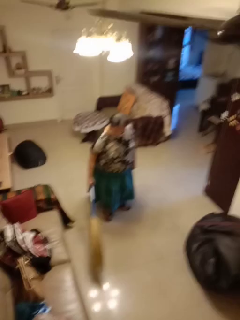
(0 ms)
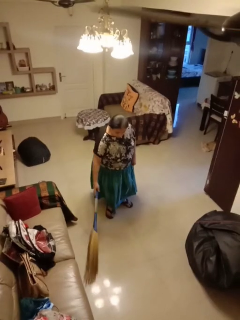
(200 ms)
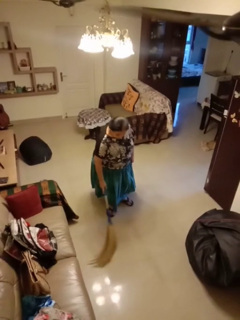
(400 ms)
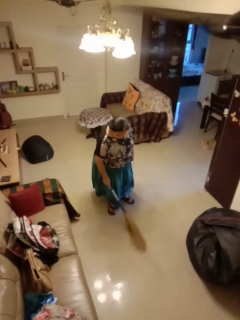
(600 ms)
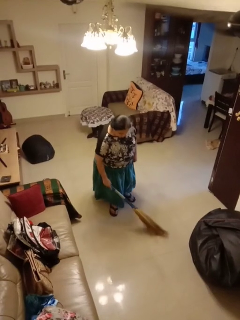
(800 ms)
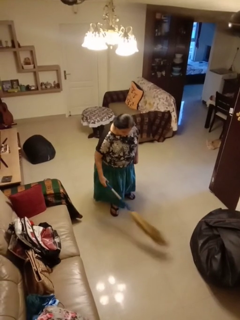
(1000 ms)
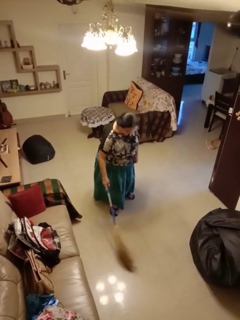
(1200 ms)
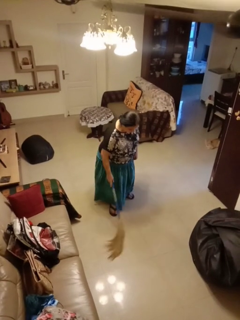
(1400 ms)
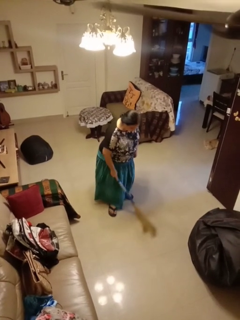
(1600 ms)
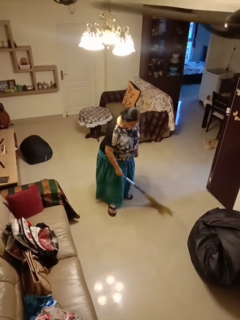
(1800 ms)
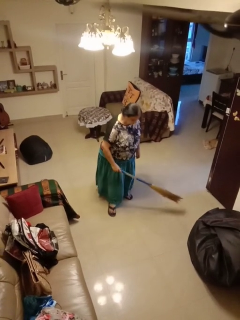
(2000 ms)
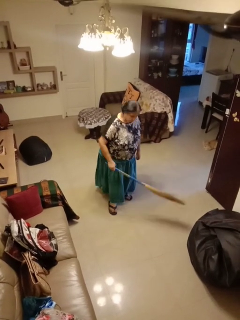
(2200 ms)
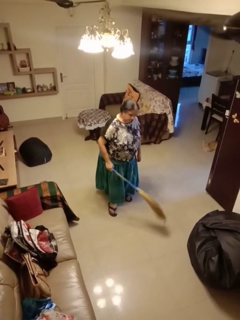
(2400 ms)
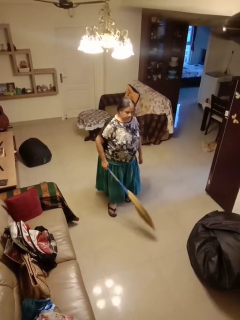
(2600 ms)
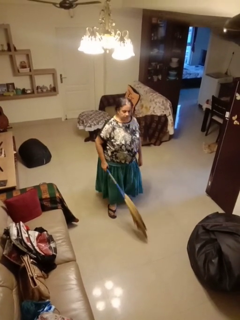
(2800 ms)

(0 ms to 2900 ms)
person sweeps floor

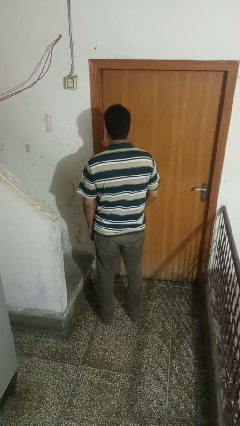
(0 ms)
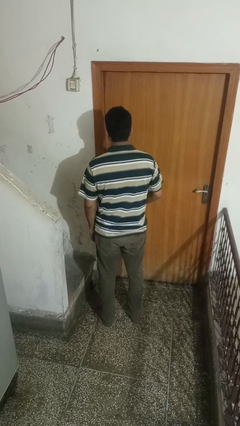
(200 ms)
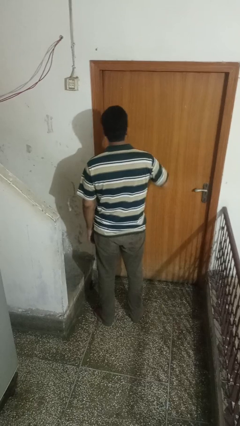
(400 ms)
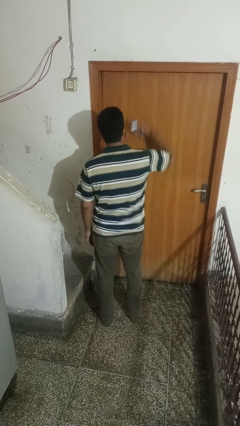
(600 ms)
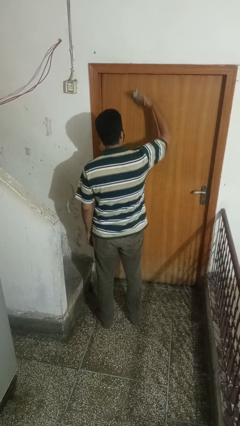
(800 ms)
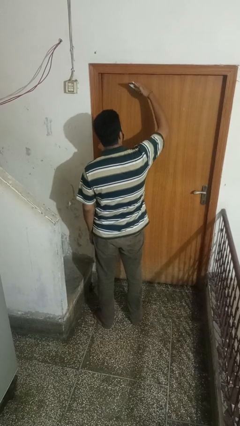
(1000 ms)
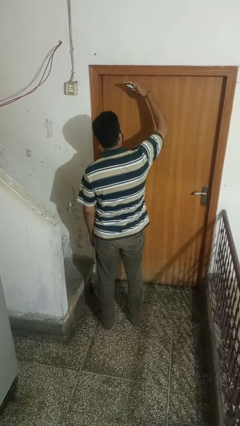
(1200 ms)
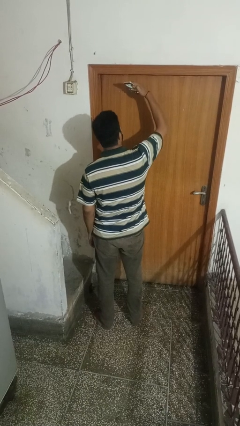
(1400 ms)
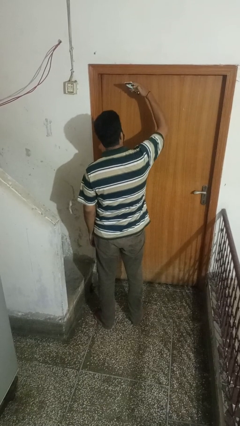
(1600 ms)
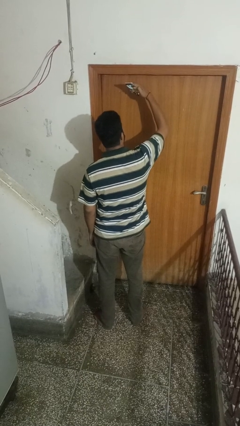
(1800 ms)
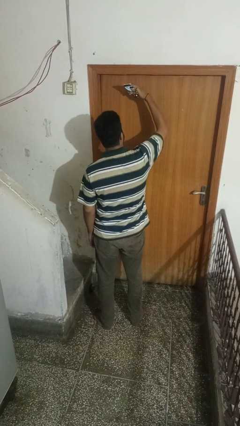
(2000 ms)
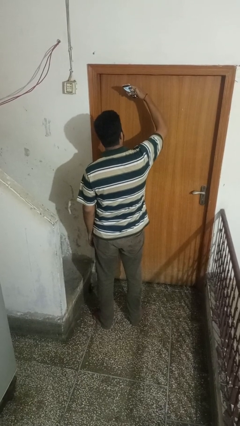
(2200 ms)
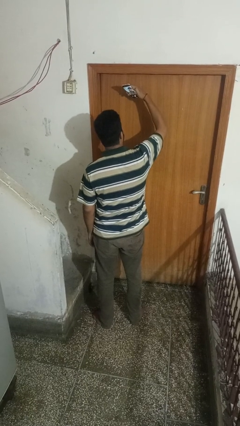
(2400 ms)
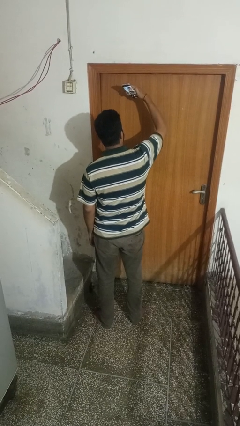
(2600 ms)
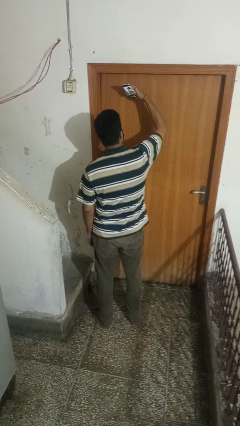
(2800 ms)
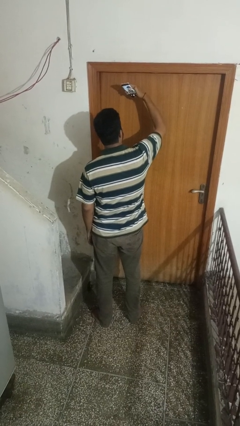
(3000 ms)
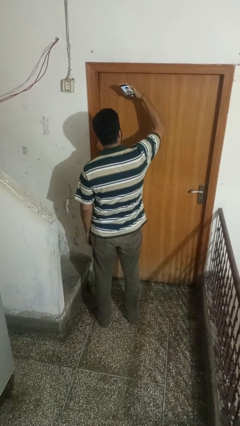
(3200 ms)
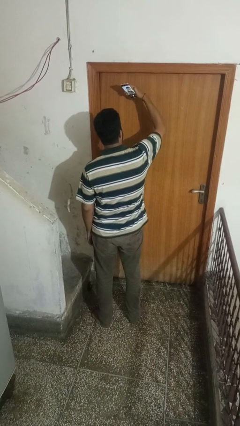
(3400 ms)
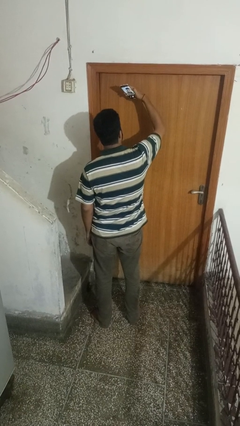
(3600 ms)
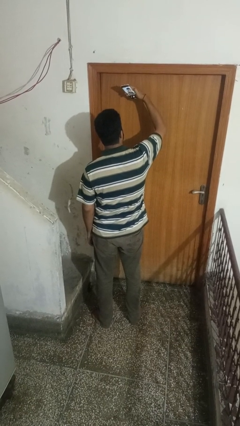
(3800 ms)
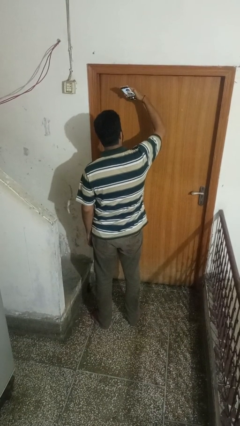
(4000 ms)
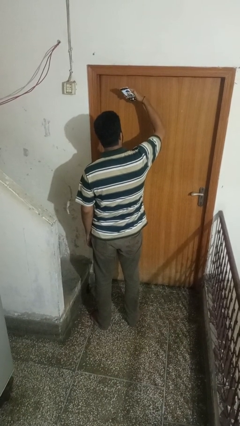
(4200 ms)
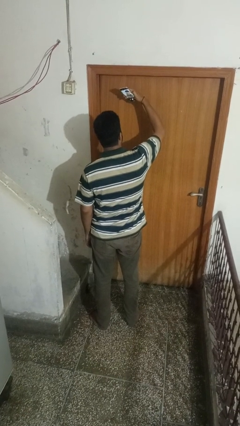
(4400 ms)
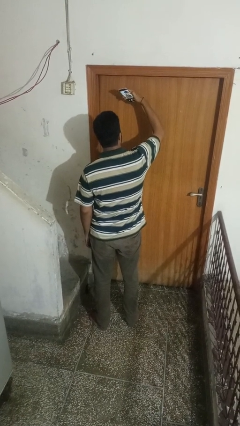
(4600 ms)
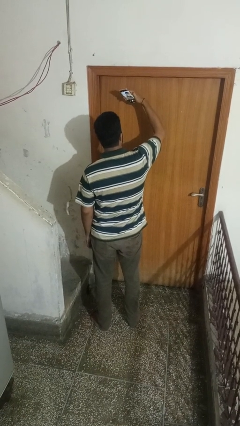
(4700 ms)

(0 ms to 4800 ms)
person takes selfie

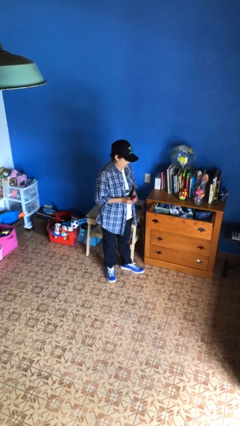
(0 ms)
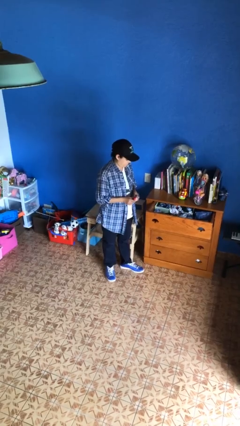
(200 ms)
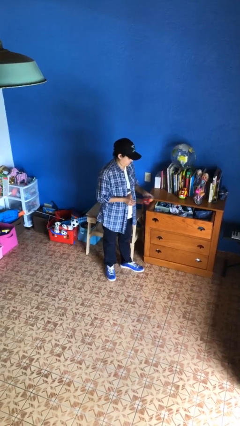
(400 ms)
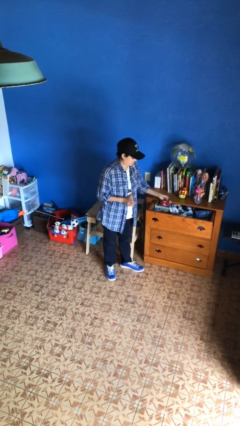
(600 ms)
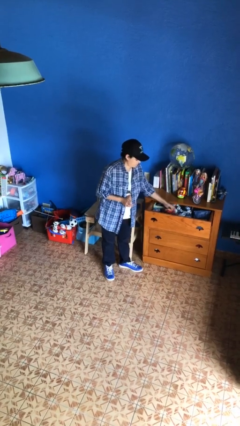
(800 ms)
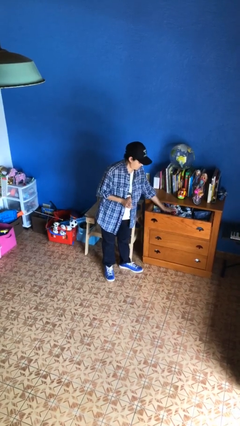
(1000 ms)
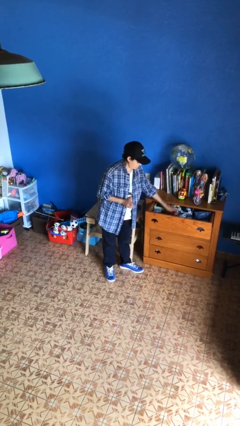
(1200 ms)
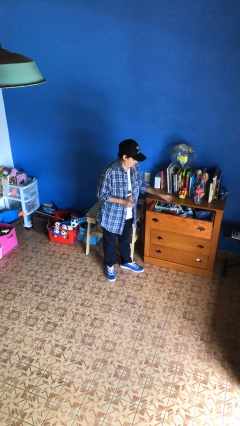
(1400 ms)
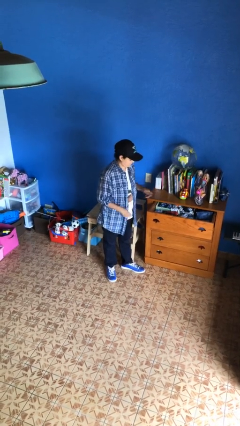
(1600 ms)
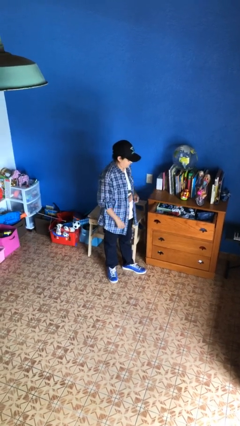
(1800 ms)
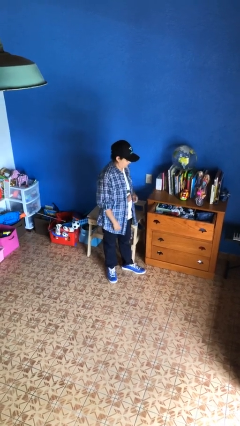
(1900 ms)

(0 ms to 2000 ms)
person puts clothes into dresser

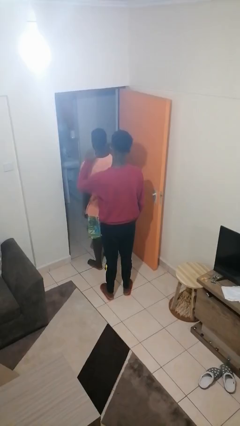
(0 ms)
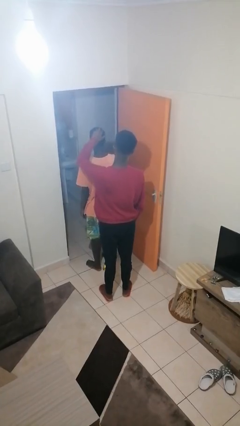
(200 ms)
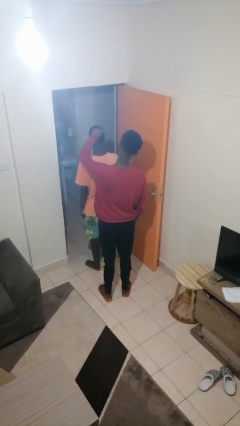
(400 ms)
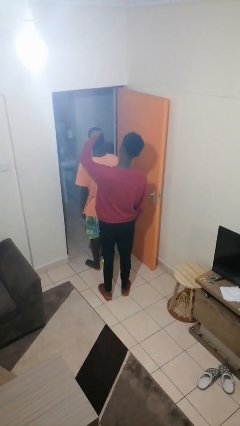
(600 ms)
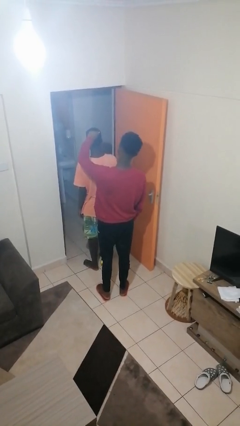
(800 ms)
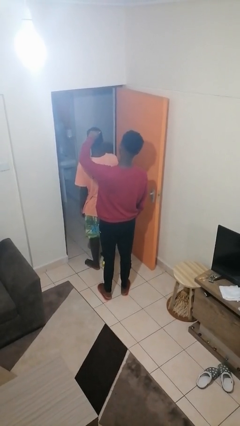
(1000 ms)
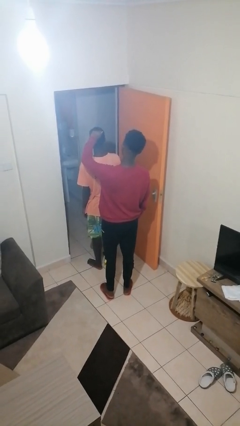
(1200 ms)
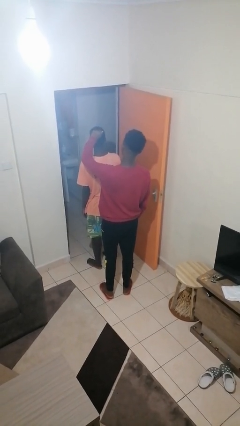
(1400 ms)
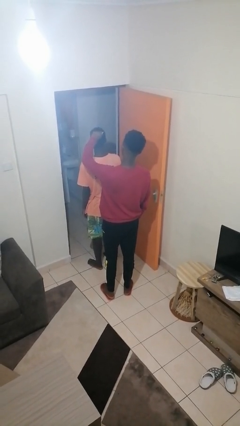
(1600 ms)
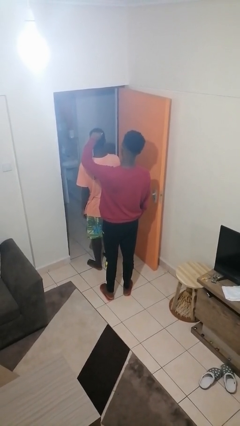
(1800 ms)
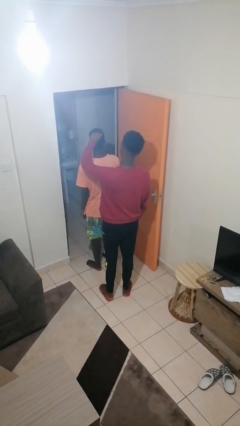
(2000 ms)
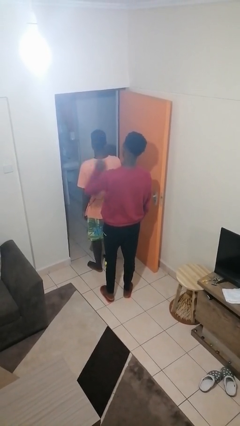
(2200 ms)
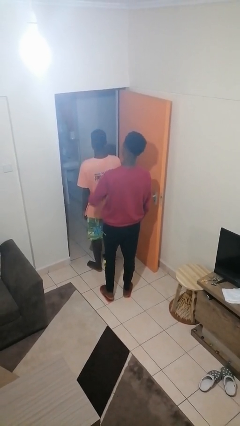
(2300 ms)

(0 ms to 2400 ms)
person grabs person by hair

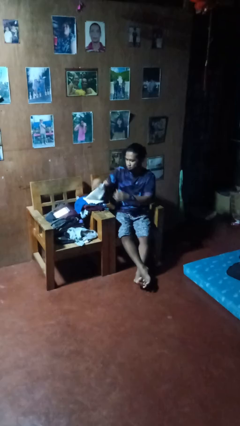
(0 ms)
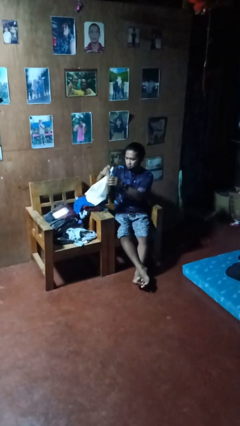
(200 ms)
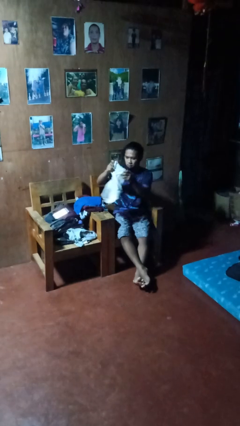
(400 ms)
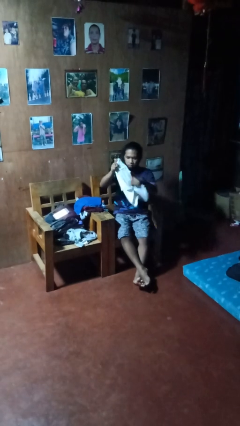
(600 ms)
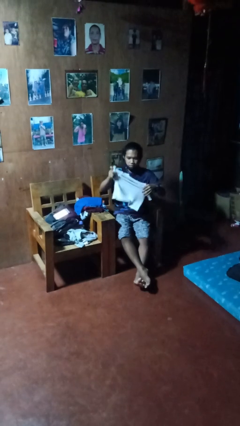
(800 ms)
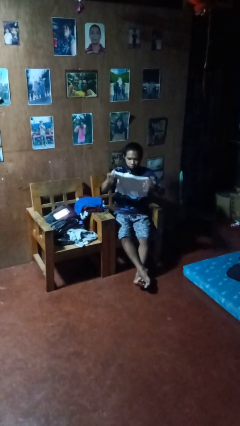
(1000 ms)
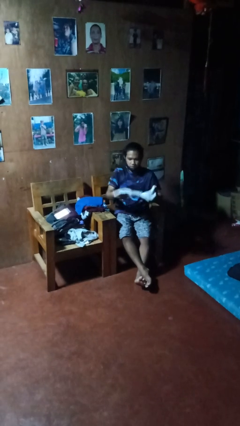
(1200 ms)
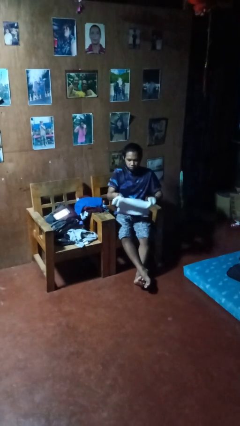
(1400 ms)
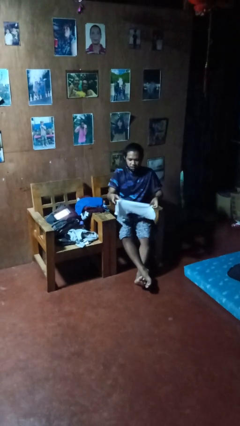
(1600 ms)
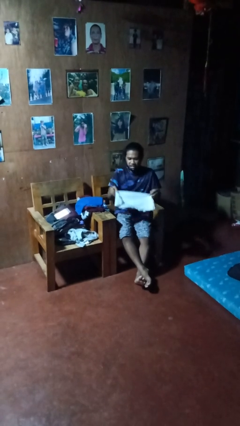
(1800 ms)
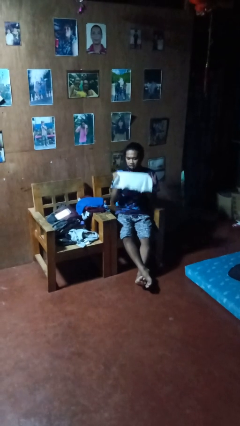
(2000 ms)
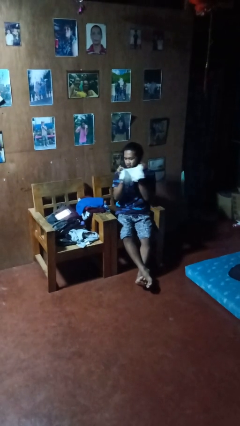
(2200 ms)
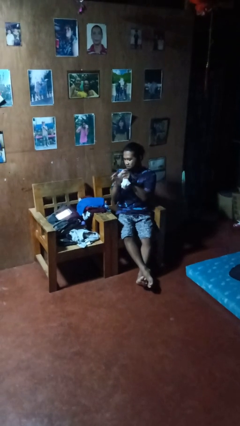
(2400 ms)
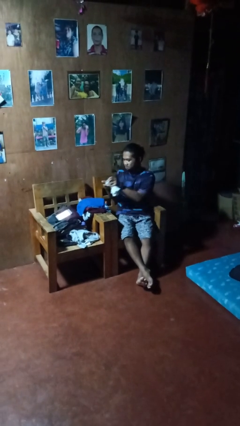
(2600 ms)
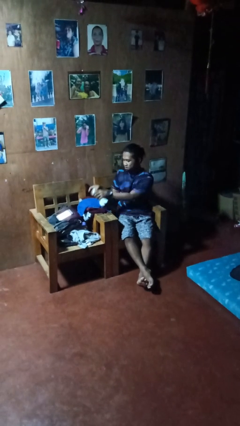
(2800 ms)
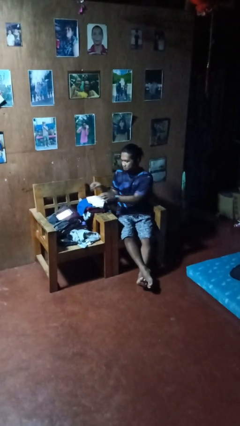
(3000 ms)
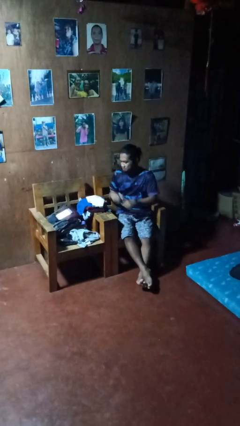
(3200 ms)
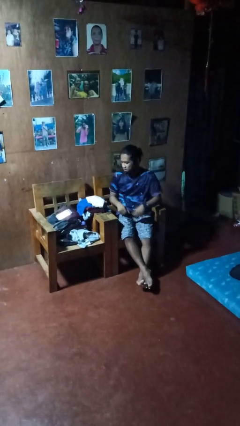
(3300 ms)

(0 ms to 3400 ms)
person folds shirt

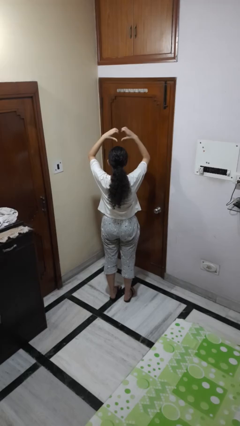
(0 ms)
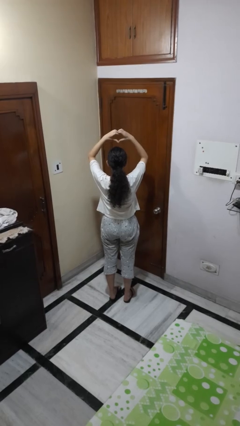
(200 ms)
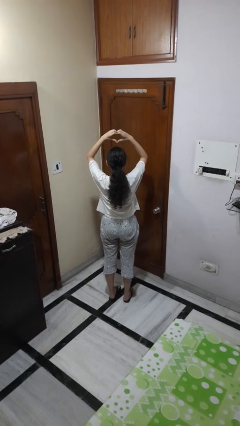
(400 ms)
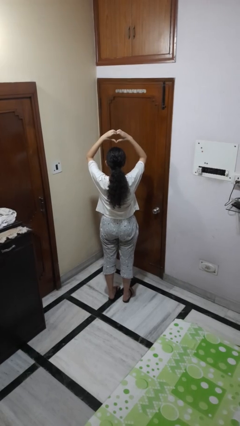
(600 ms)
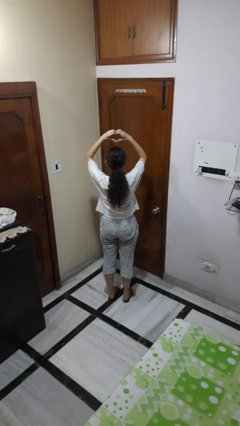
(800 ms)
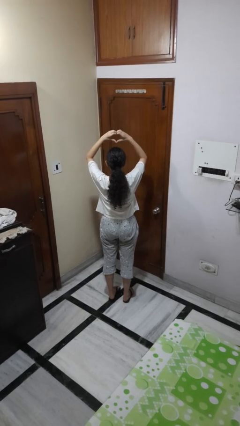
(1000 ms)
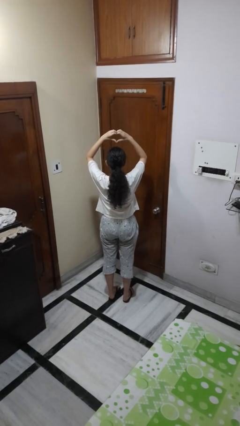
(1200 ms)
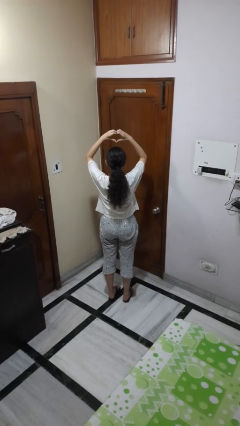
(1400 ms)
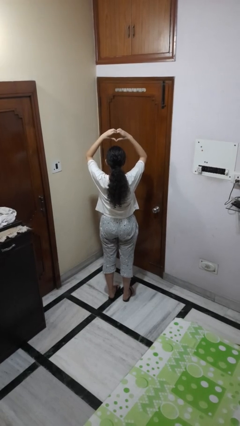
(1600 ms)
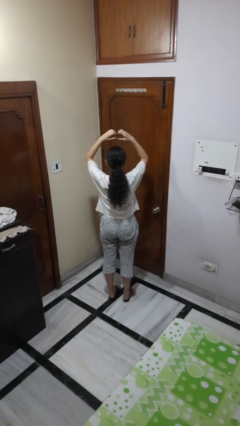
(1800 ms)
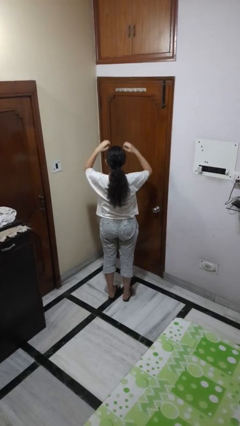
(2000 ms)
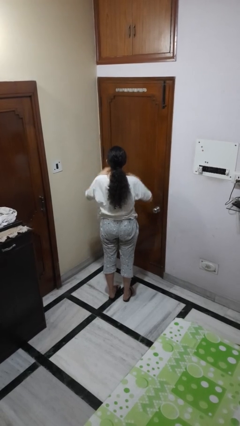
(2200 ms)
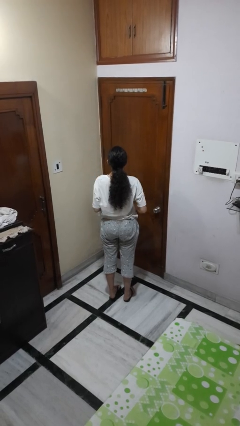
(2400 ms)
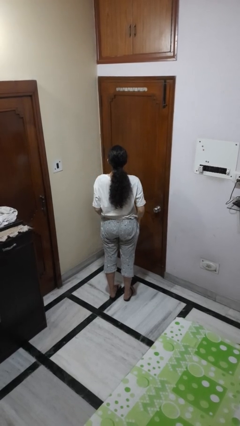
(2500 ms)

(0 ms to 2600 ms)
person gestures heart

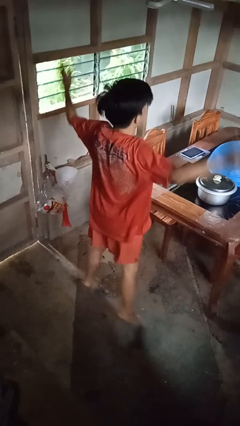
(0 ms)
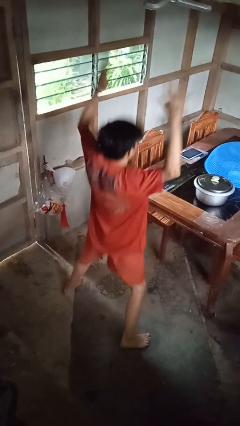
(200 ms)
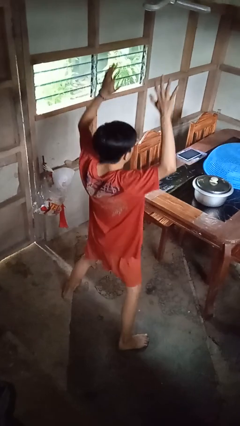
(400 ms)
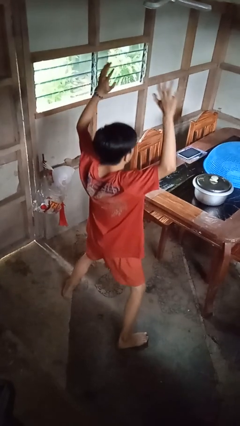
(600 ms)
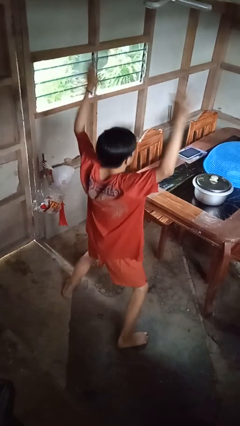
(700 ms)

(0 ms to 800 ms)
person exercises with jumping jacks
